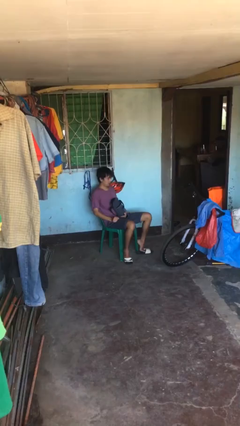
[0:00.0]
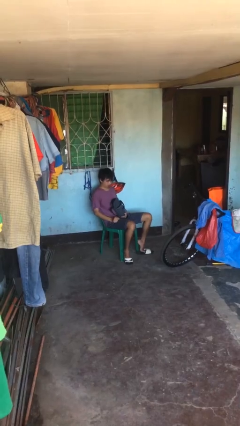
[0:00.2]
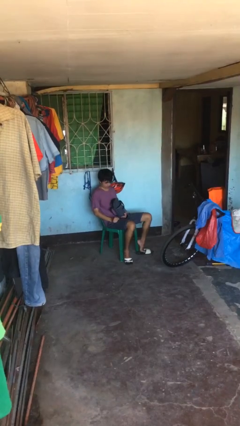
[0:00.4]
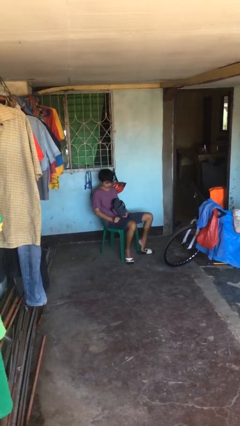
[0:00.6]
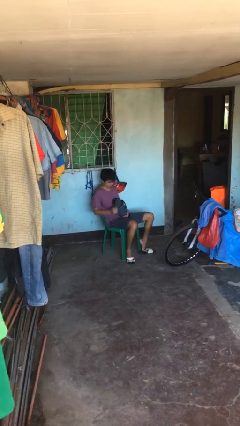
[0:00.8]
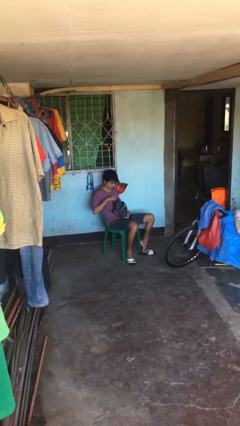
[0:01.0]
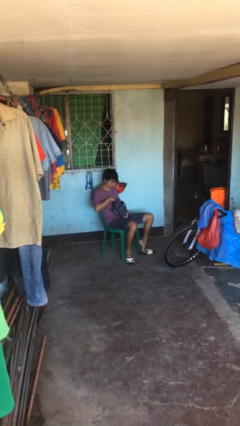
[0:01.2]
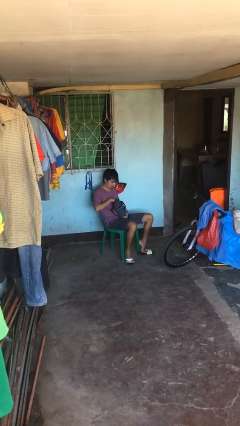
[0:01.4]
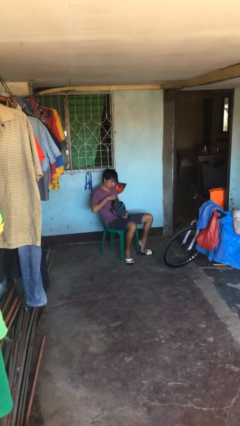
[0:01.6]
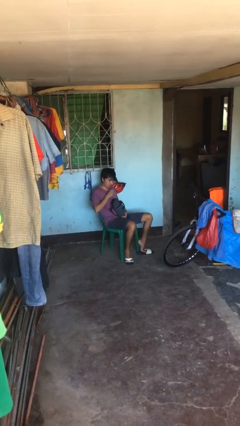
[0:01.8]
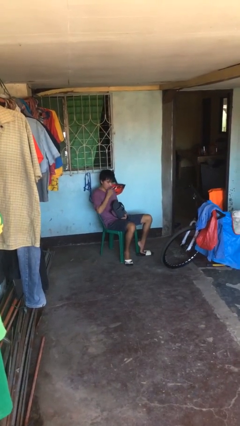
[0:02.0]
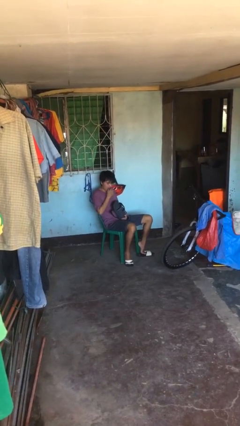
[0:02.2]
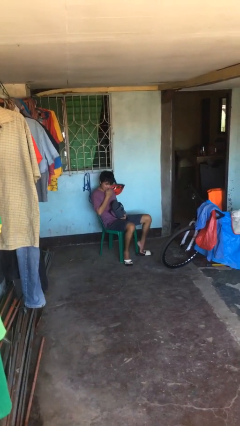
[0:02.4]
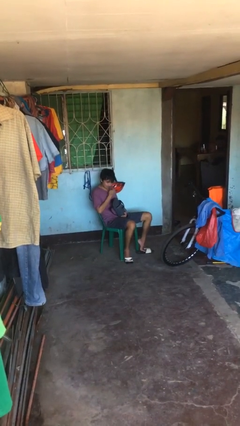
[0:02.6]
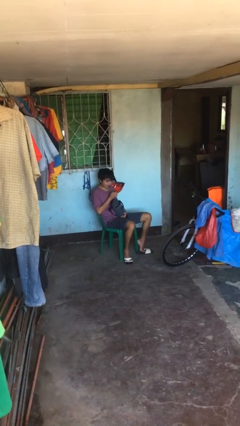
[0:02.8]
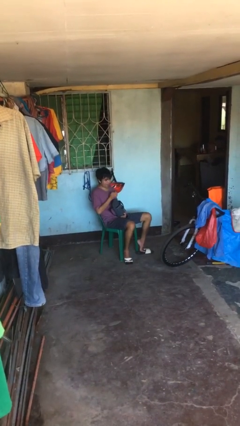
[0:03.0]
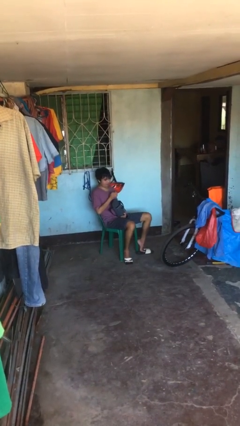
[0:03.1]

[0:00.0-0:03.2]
person eats snack from bag

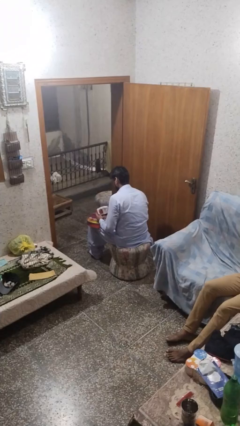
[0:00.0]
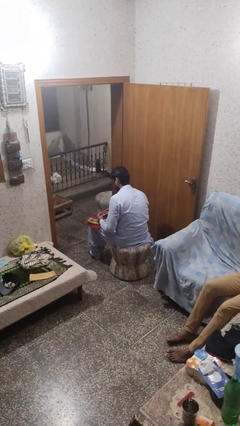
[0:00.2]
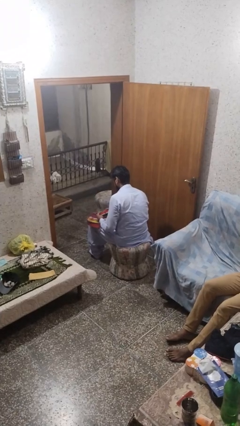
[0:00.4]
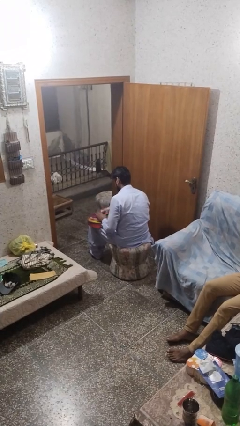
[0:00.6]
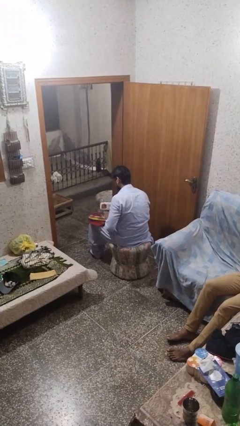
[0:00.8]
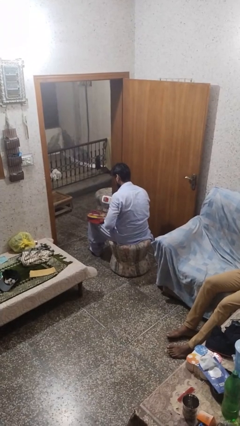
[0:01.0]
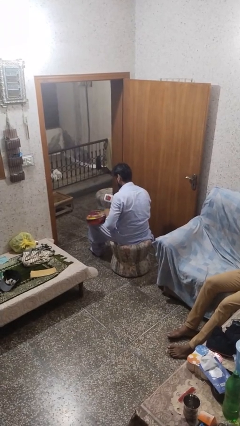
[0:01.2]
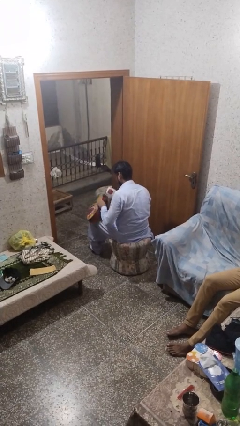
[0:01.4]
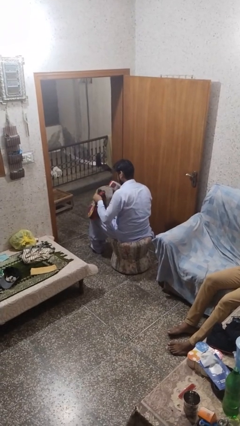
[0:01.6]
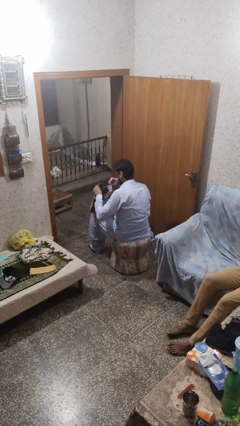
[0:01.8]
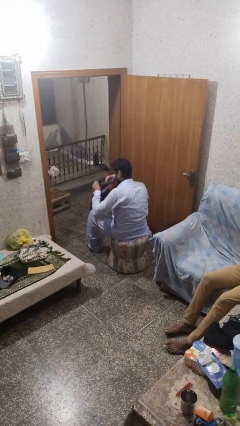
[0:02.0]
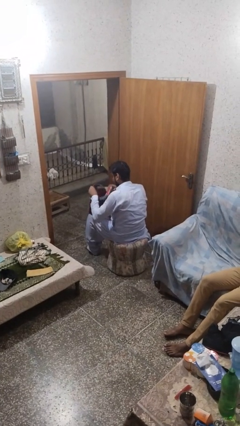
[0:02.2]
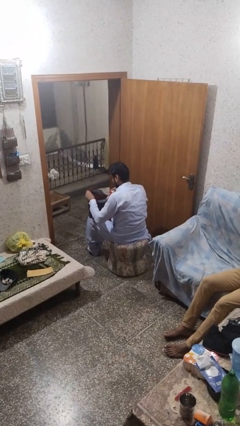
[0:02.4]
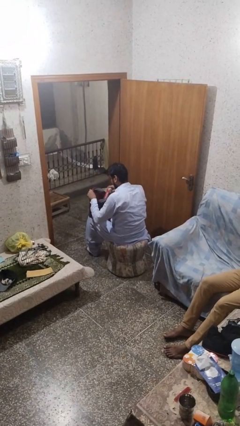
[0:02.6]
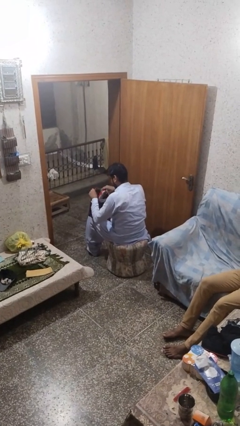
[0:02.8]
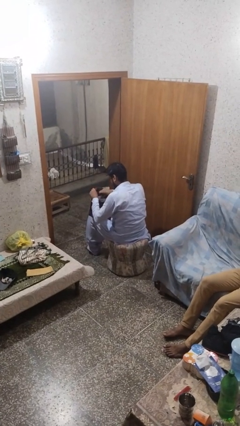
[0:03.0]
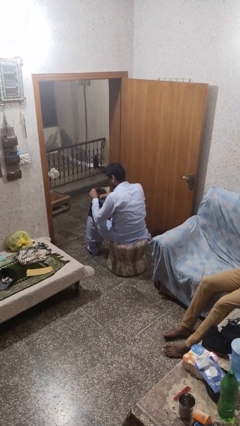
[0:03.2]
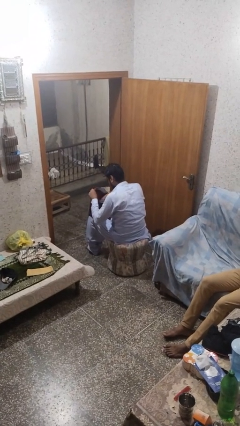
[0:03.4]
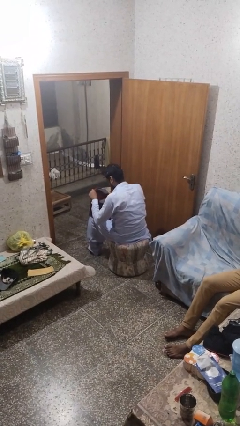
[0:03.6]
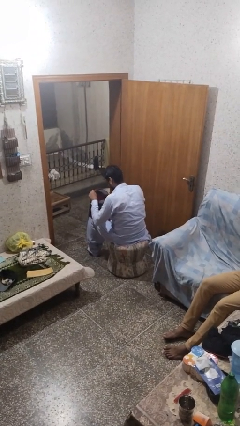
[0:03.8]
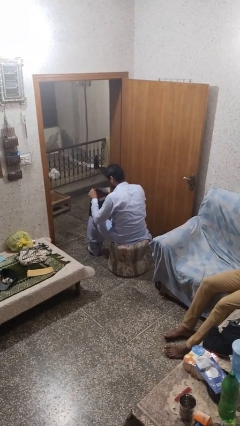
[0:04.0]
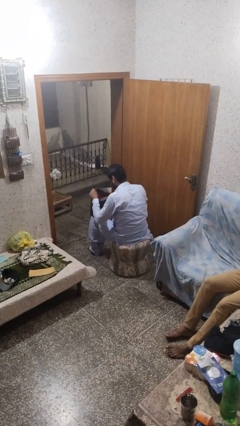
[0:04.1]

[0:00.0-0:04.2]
person puts object into backpack

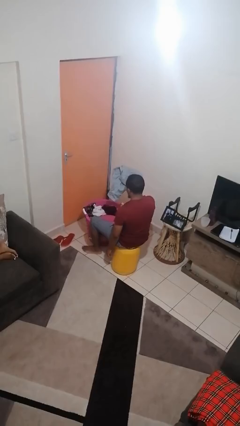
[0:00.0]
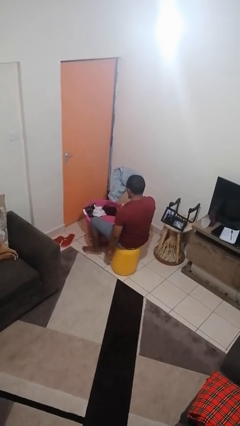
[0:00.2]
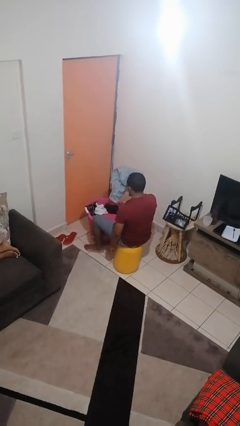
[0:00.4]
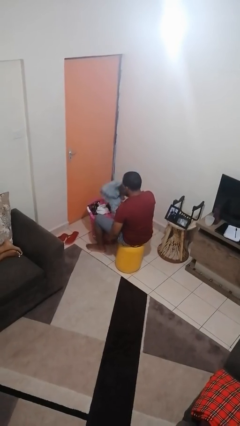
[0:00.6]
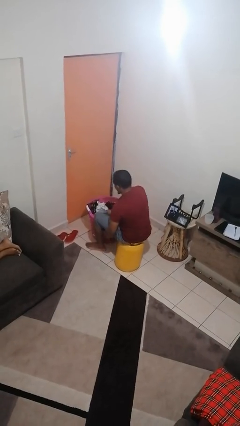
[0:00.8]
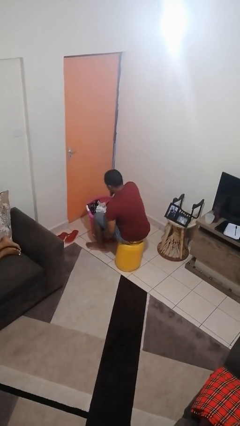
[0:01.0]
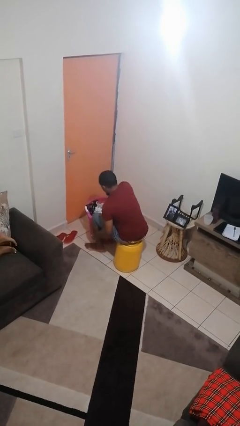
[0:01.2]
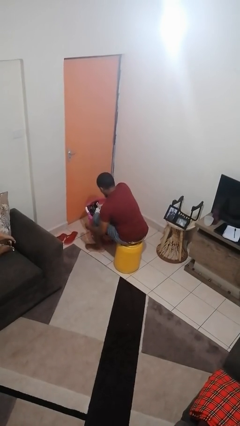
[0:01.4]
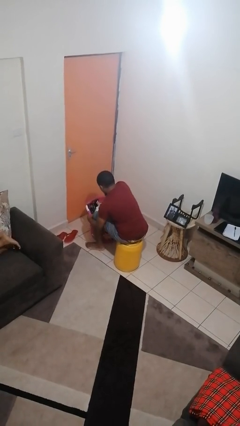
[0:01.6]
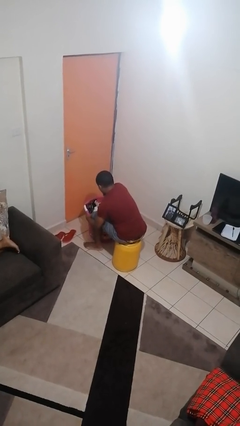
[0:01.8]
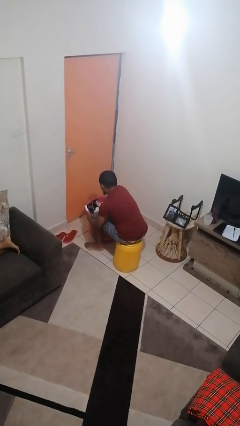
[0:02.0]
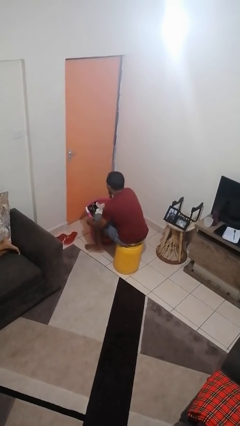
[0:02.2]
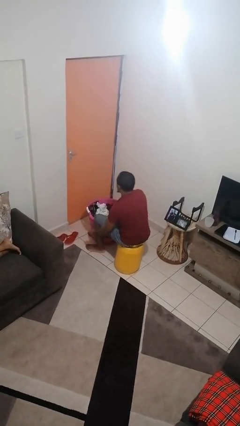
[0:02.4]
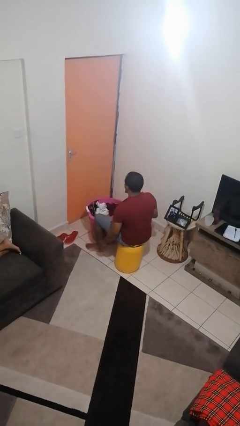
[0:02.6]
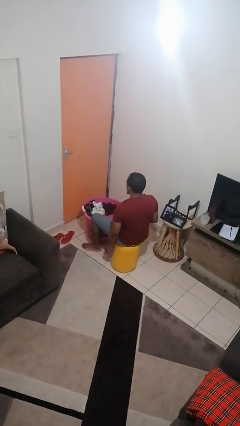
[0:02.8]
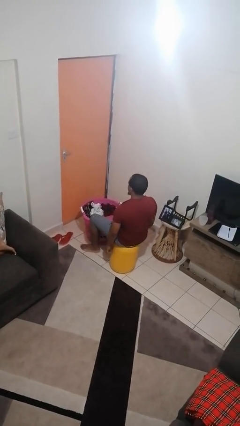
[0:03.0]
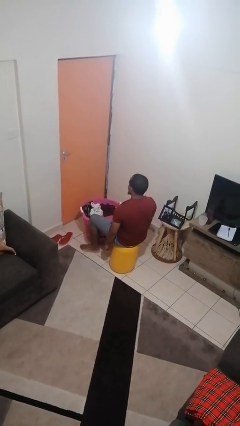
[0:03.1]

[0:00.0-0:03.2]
person puts object into basket

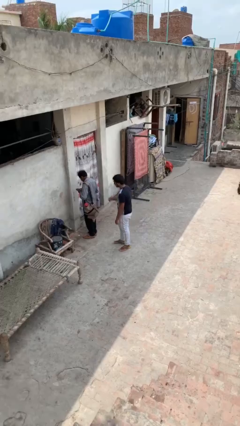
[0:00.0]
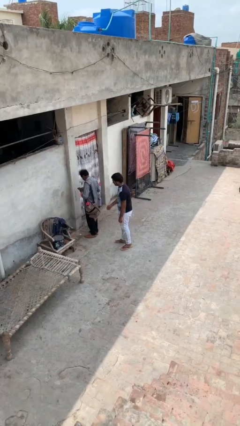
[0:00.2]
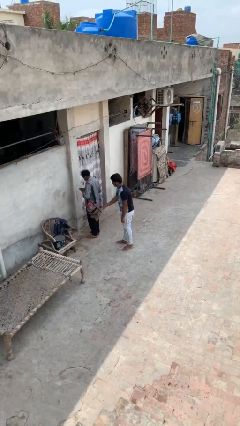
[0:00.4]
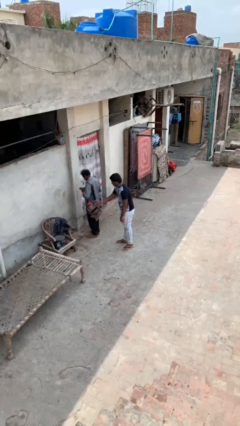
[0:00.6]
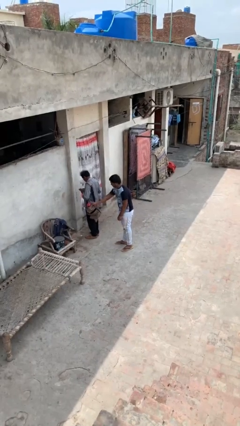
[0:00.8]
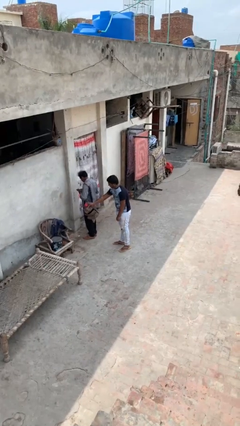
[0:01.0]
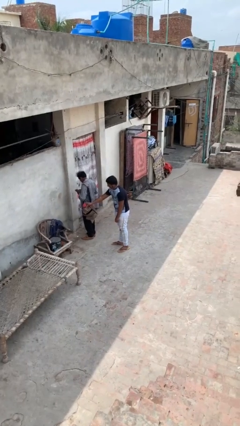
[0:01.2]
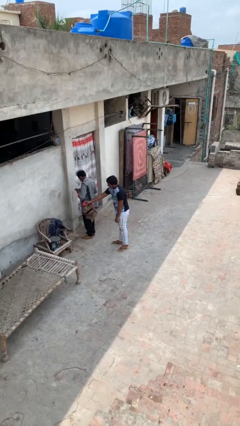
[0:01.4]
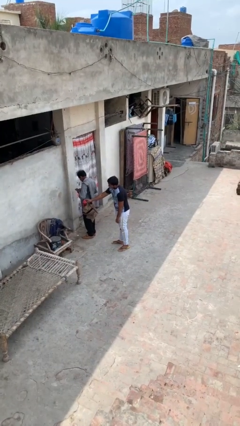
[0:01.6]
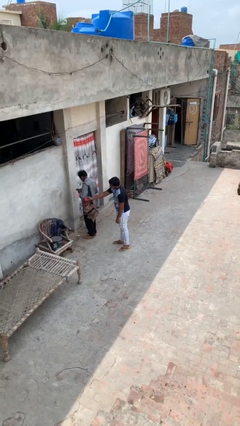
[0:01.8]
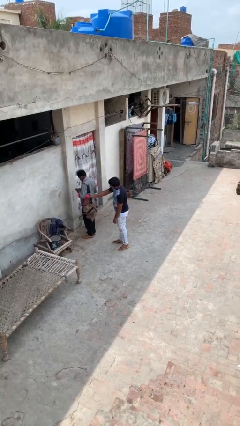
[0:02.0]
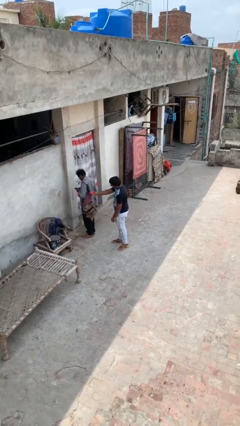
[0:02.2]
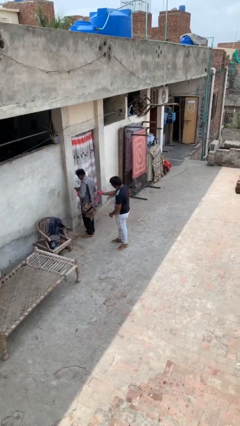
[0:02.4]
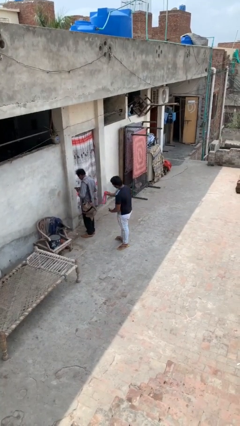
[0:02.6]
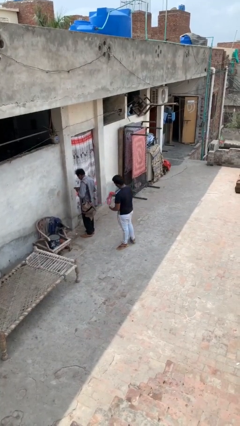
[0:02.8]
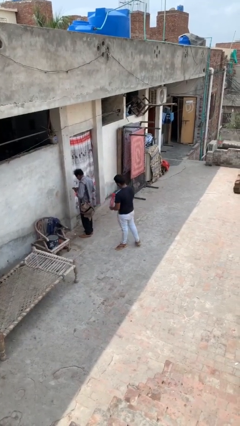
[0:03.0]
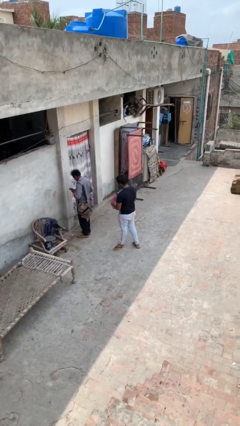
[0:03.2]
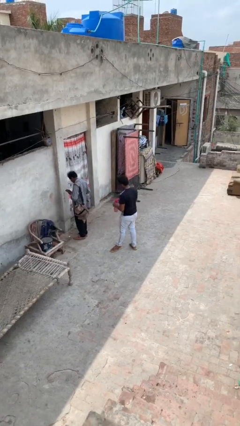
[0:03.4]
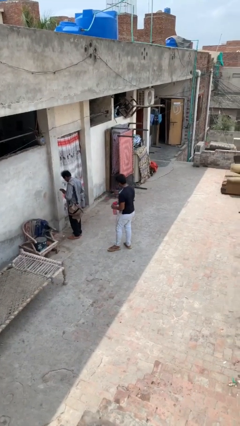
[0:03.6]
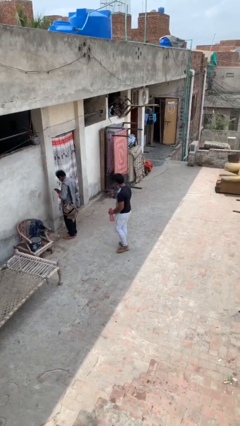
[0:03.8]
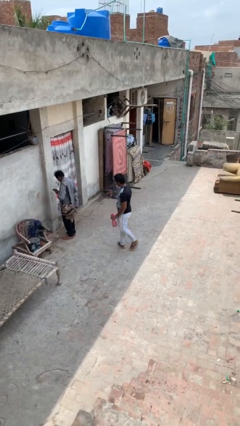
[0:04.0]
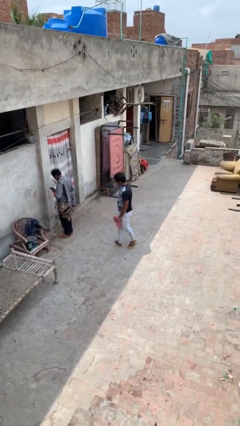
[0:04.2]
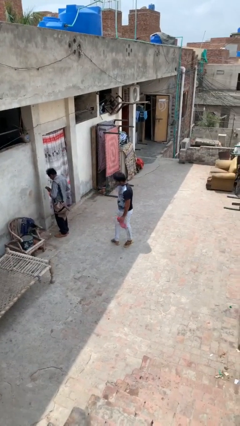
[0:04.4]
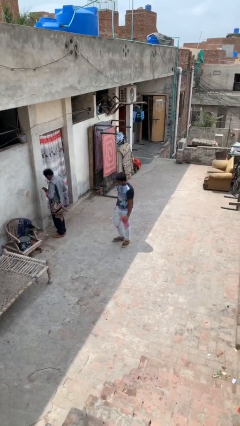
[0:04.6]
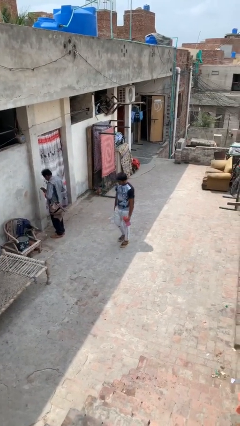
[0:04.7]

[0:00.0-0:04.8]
person steals object from person

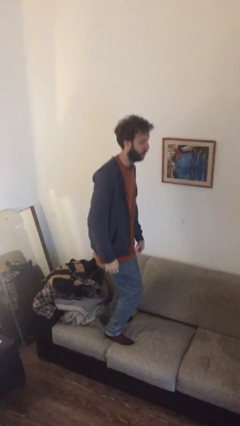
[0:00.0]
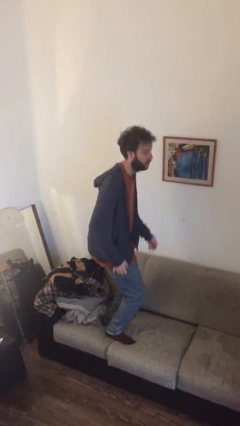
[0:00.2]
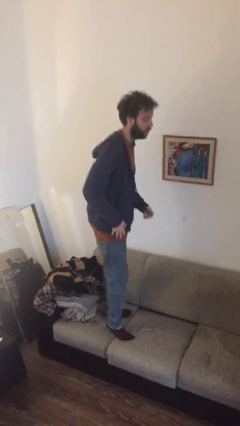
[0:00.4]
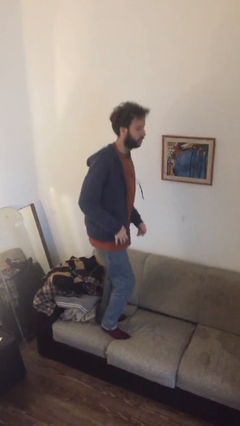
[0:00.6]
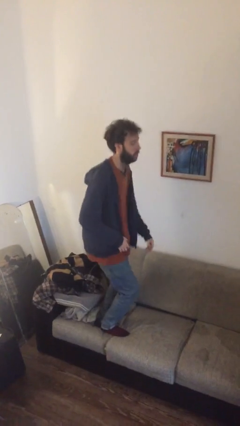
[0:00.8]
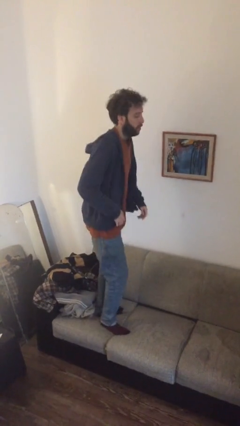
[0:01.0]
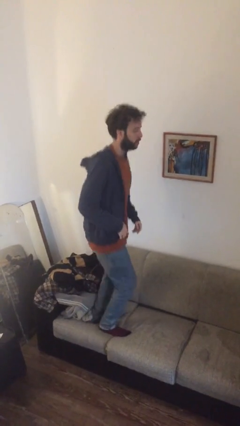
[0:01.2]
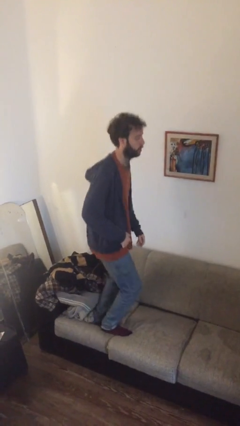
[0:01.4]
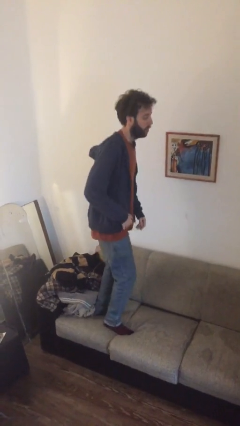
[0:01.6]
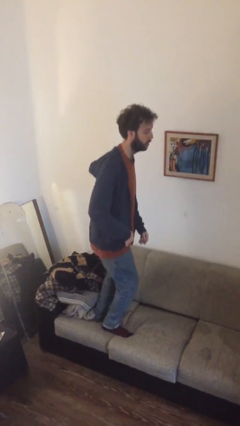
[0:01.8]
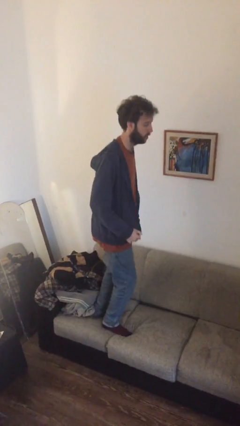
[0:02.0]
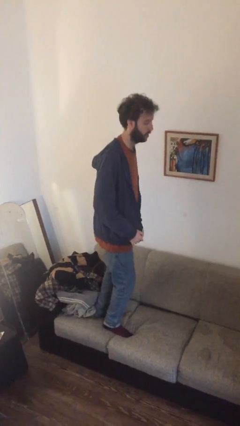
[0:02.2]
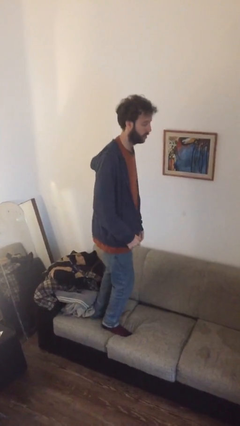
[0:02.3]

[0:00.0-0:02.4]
person jumps on couch
